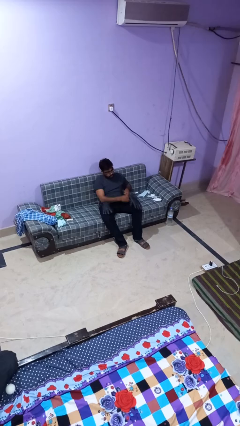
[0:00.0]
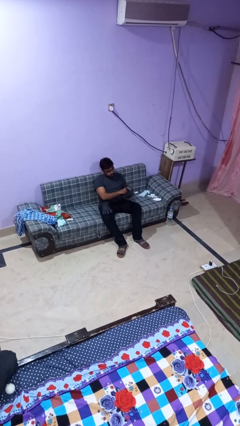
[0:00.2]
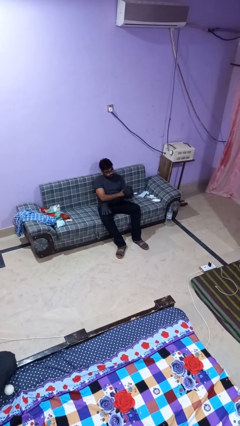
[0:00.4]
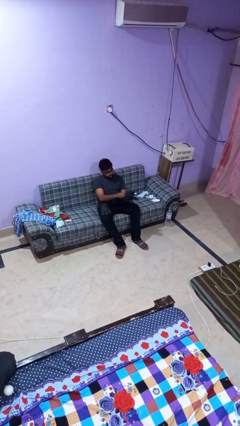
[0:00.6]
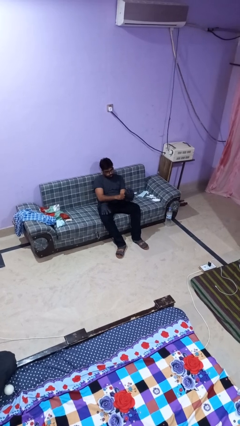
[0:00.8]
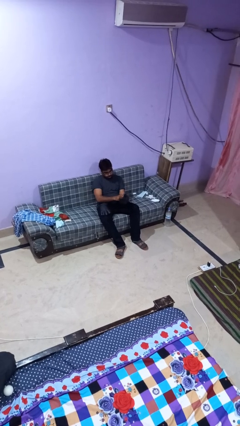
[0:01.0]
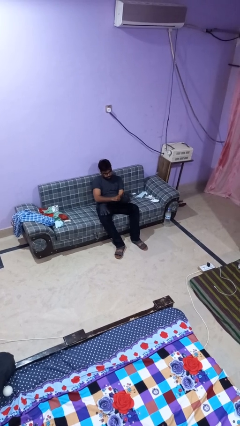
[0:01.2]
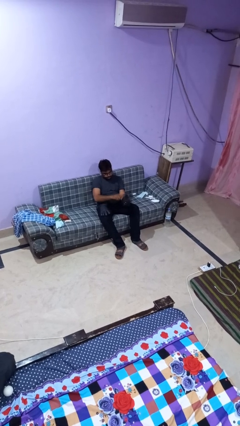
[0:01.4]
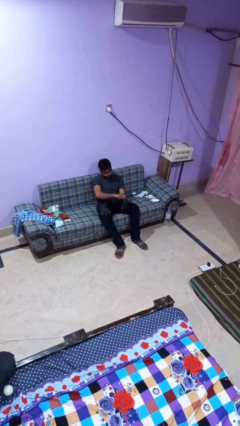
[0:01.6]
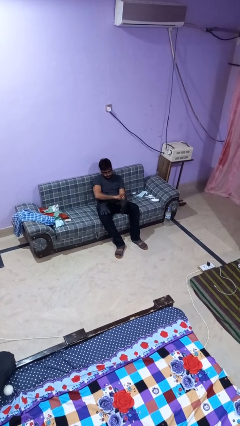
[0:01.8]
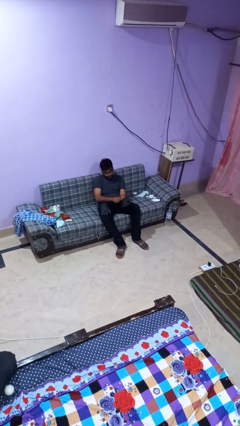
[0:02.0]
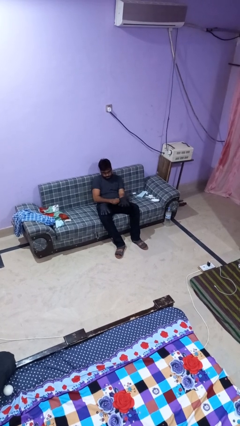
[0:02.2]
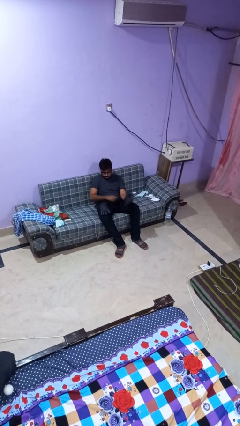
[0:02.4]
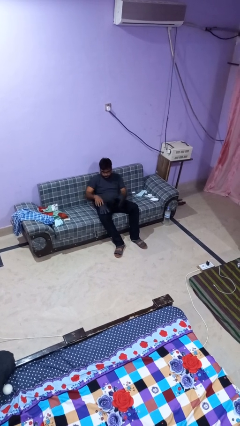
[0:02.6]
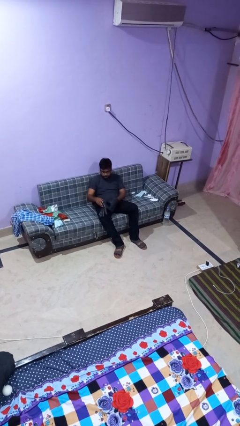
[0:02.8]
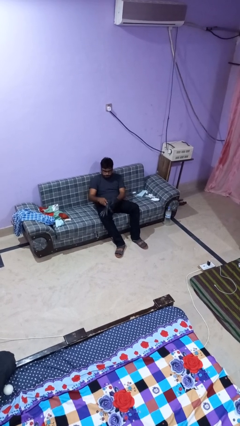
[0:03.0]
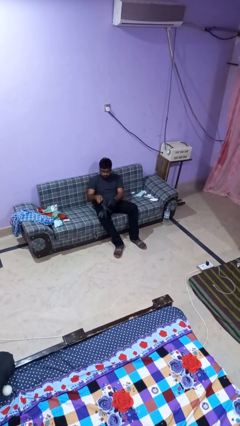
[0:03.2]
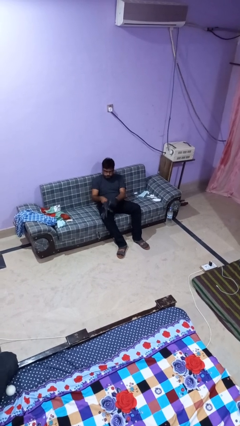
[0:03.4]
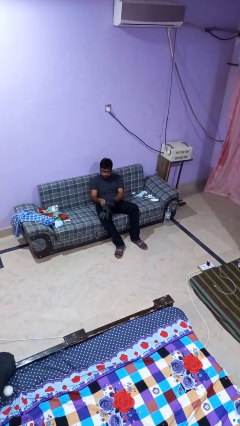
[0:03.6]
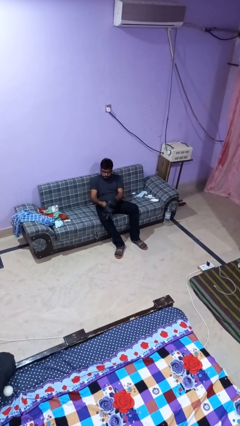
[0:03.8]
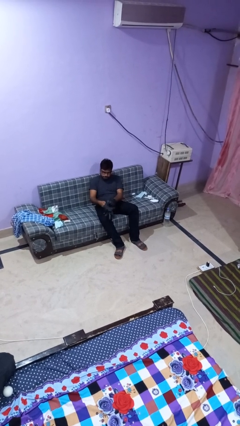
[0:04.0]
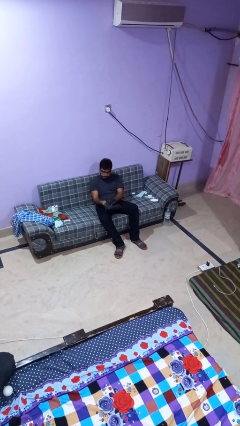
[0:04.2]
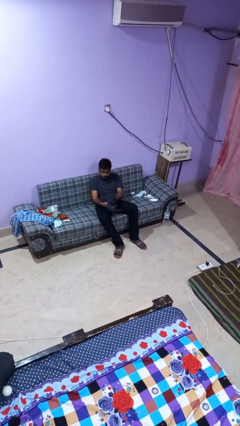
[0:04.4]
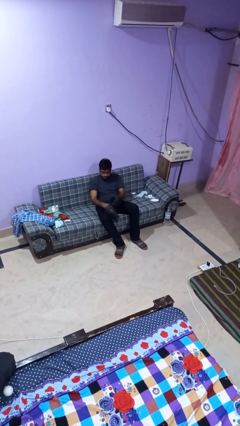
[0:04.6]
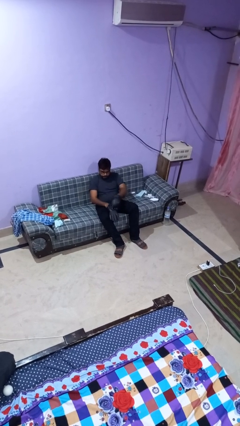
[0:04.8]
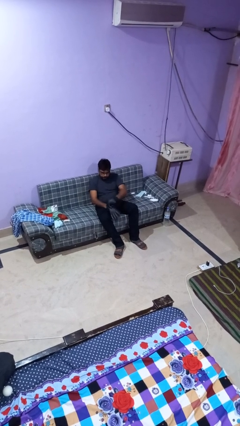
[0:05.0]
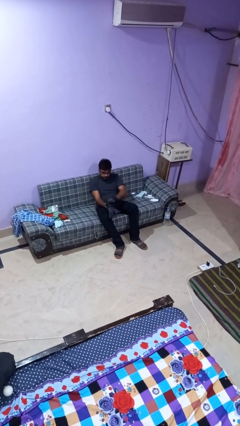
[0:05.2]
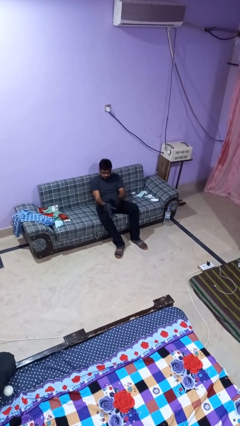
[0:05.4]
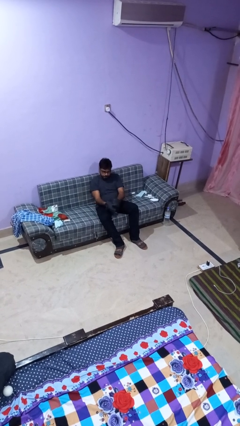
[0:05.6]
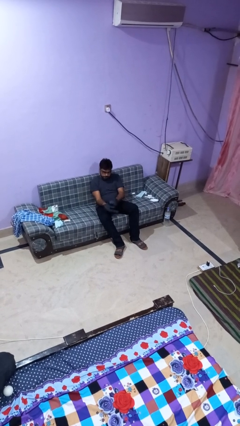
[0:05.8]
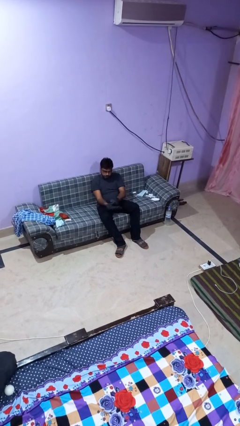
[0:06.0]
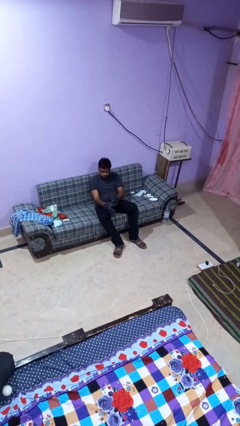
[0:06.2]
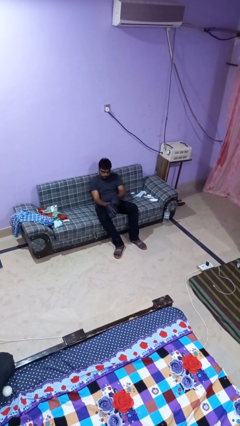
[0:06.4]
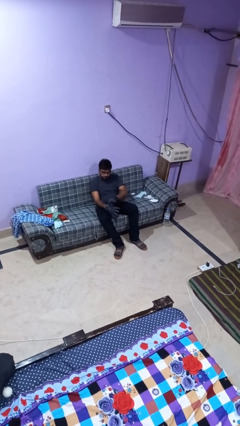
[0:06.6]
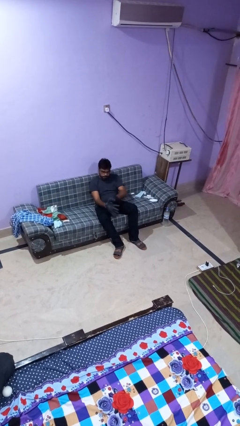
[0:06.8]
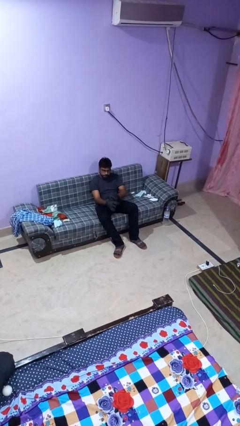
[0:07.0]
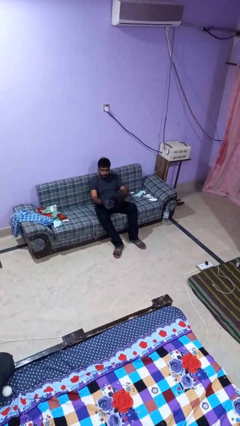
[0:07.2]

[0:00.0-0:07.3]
person puts on gloves

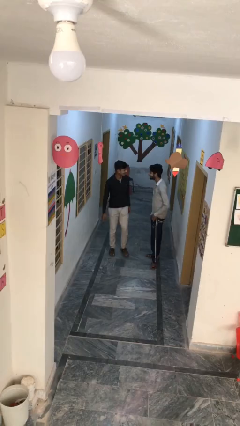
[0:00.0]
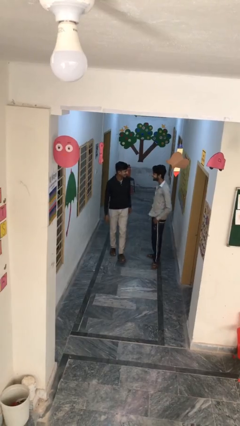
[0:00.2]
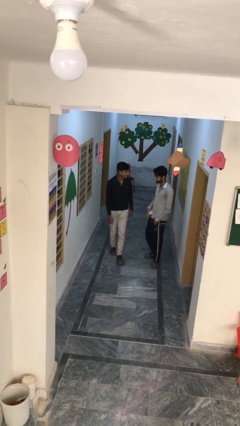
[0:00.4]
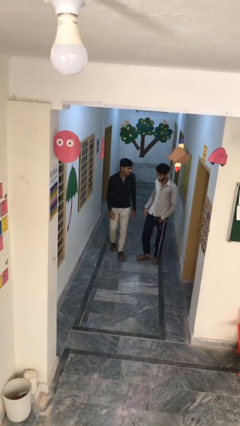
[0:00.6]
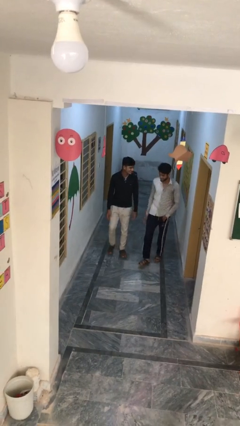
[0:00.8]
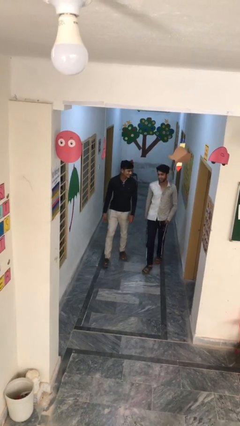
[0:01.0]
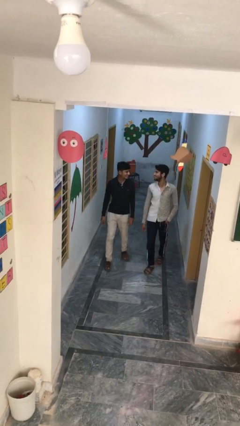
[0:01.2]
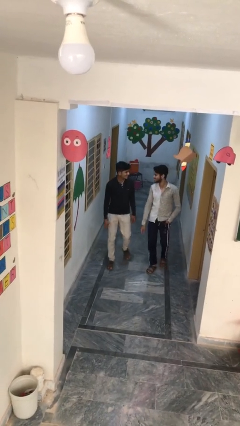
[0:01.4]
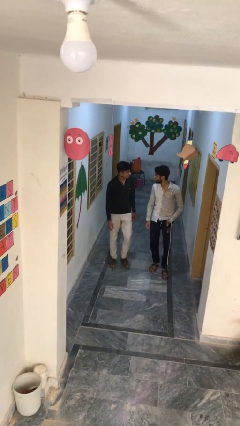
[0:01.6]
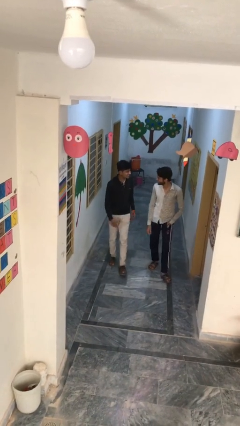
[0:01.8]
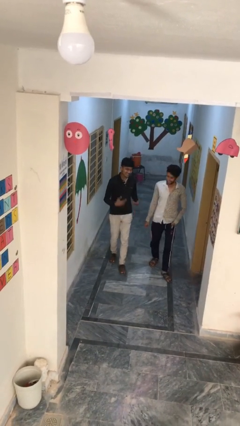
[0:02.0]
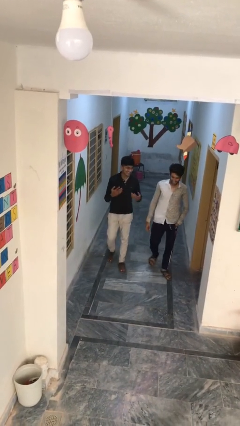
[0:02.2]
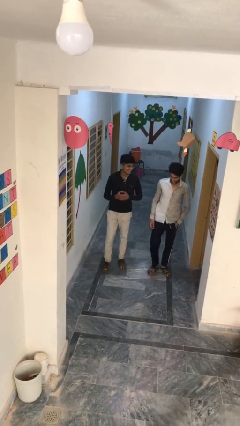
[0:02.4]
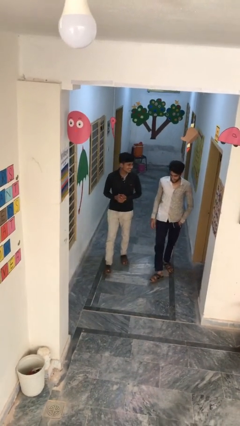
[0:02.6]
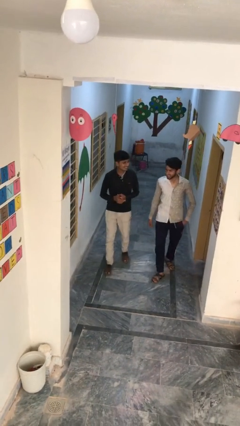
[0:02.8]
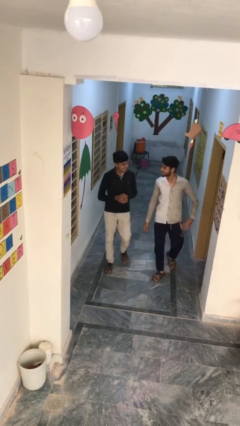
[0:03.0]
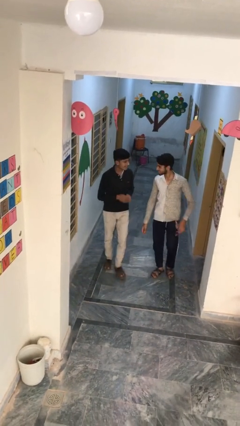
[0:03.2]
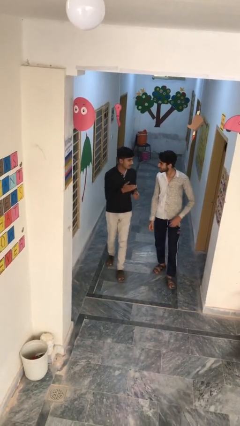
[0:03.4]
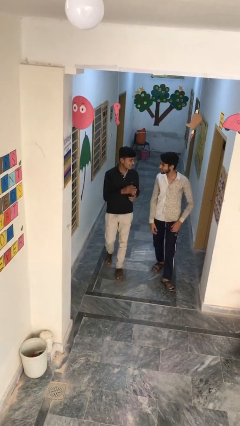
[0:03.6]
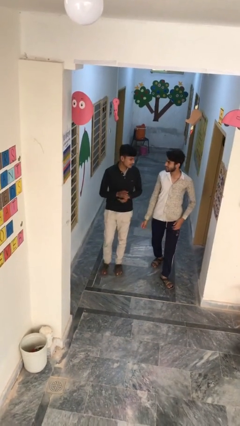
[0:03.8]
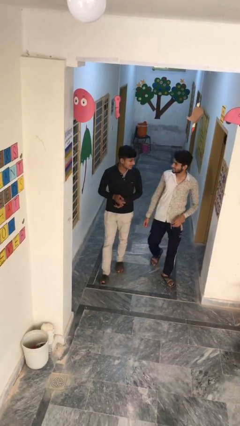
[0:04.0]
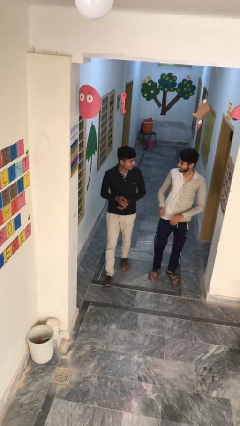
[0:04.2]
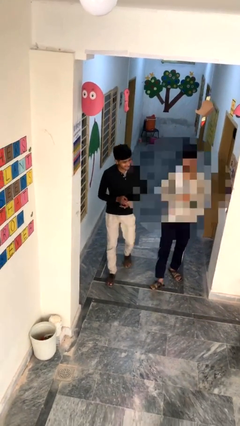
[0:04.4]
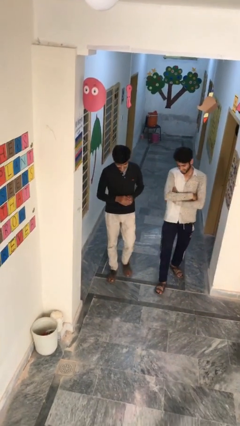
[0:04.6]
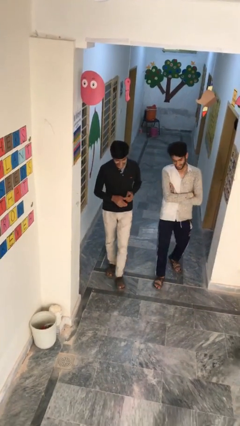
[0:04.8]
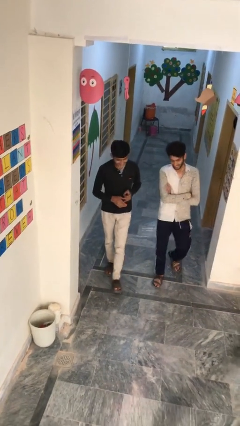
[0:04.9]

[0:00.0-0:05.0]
person talks to person

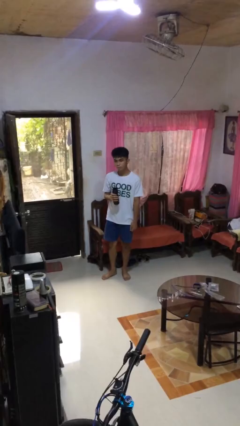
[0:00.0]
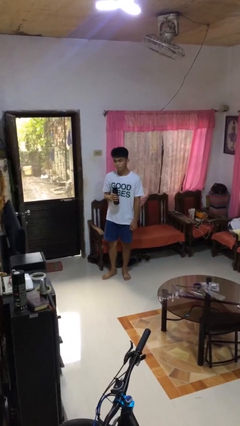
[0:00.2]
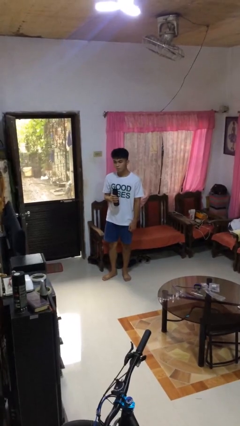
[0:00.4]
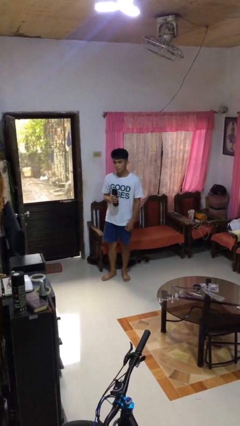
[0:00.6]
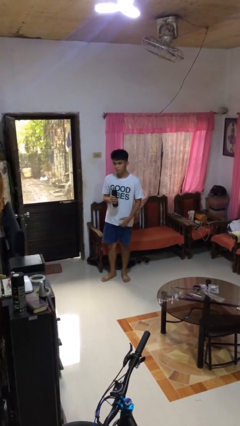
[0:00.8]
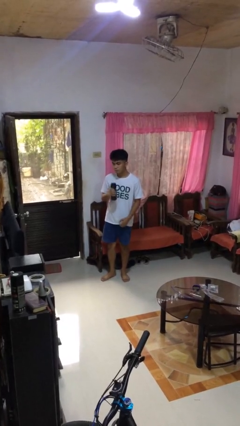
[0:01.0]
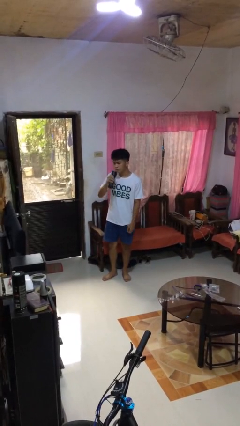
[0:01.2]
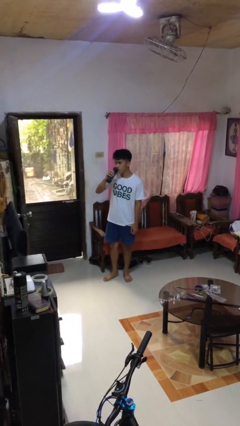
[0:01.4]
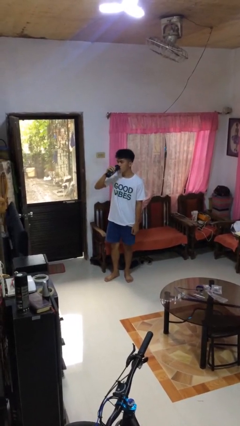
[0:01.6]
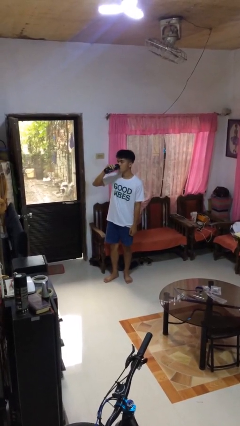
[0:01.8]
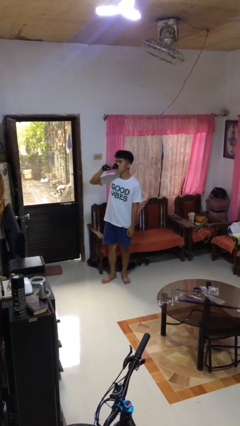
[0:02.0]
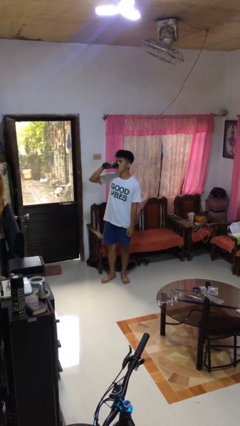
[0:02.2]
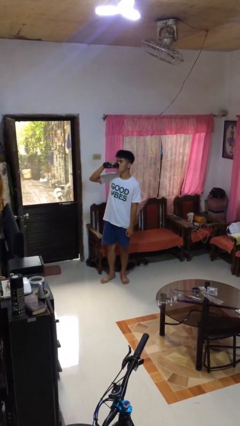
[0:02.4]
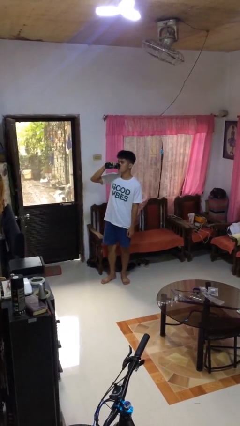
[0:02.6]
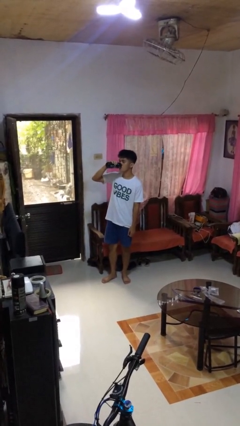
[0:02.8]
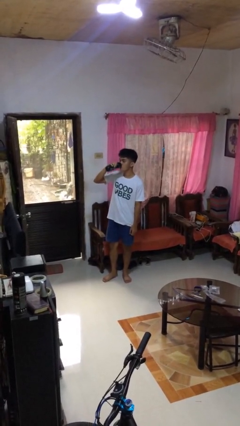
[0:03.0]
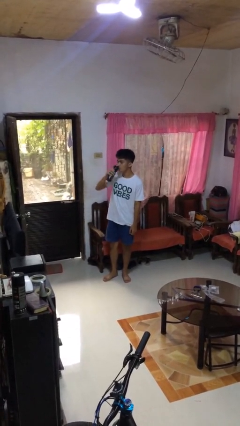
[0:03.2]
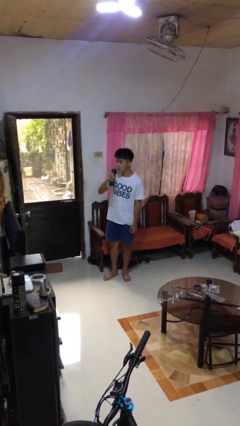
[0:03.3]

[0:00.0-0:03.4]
person drinks from bottle

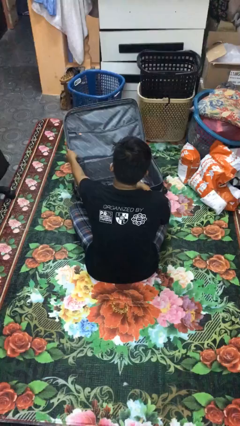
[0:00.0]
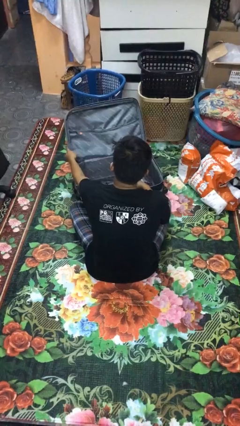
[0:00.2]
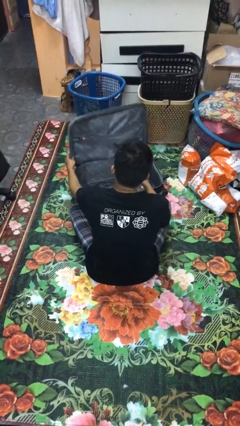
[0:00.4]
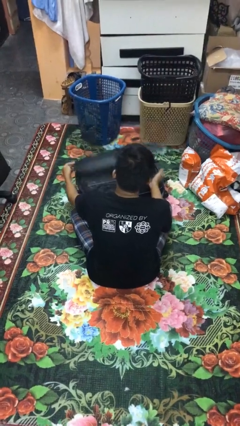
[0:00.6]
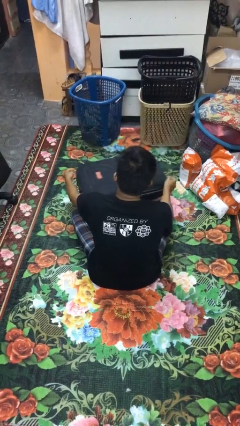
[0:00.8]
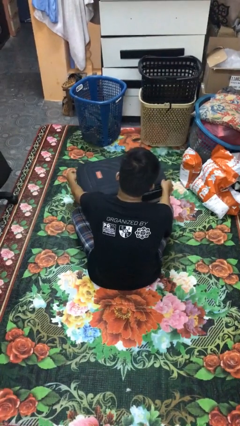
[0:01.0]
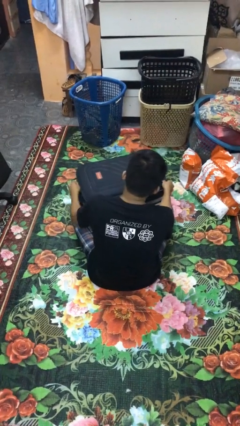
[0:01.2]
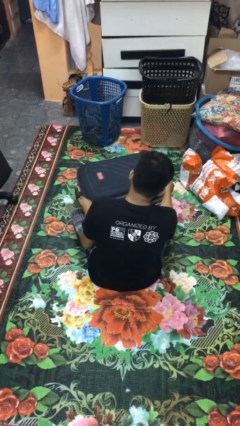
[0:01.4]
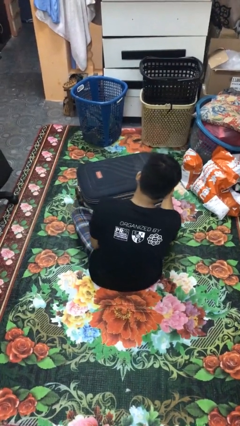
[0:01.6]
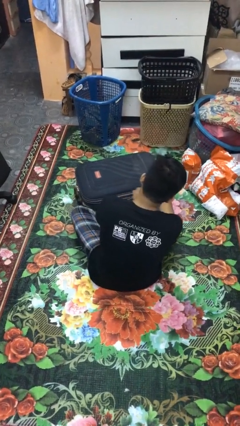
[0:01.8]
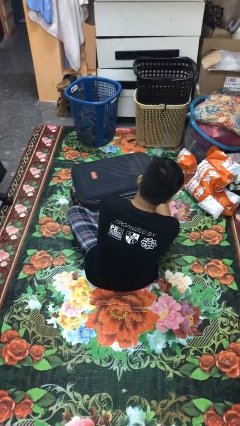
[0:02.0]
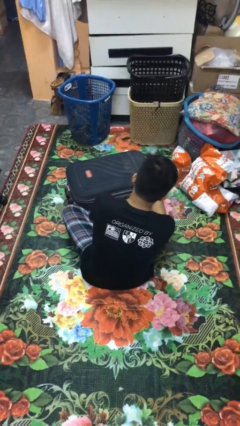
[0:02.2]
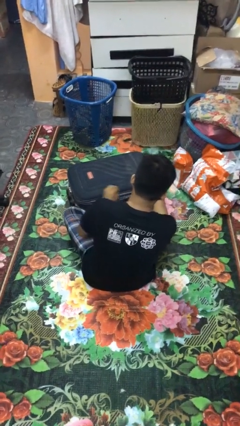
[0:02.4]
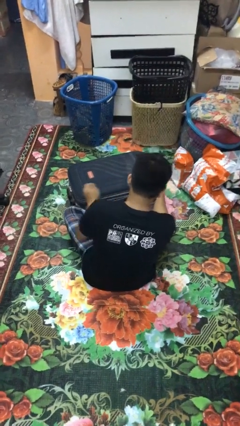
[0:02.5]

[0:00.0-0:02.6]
person closes suitcase
